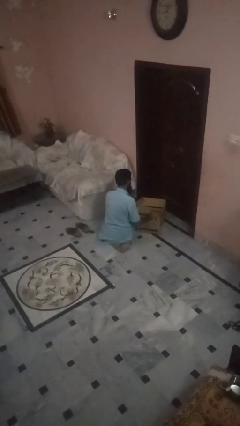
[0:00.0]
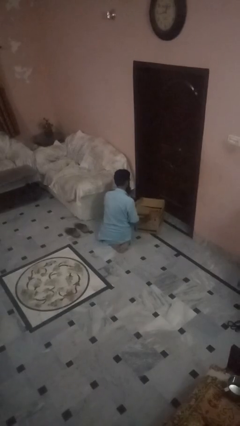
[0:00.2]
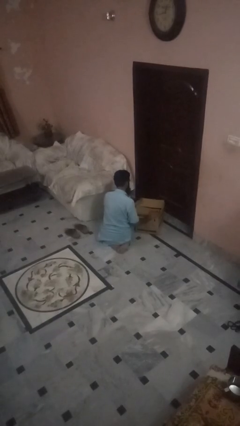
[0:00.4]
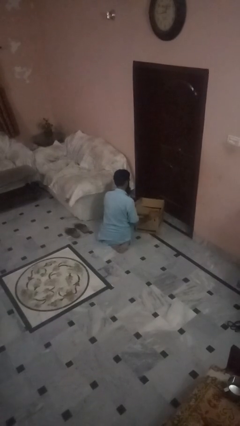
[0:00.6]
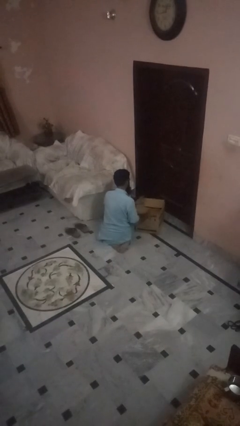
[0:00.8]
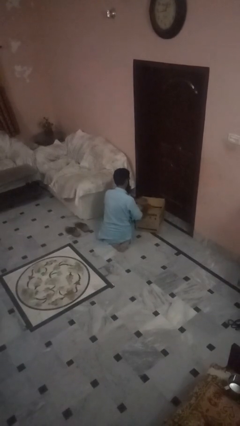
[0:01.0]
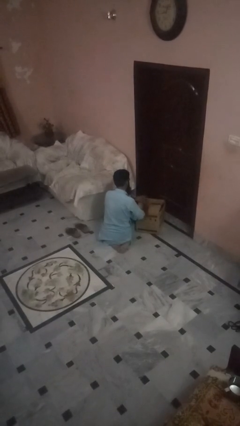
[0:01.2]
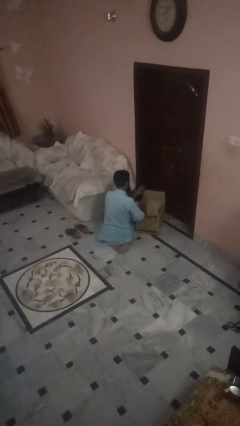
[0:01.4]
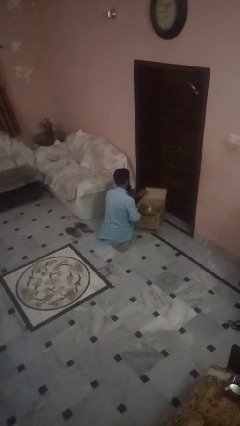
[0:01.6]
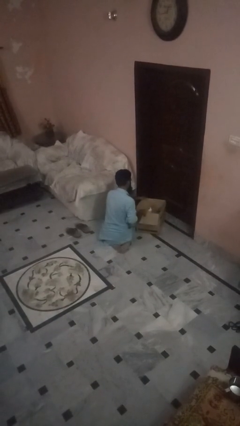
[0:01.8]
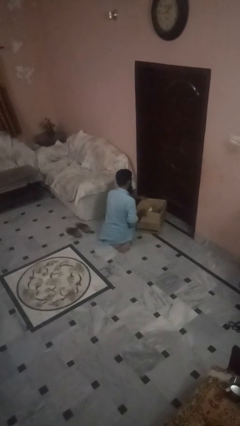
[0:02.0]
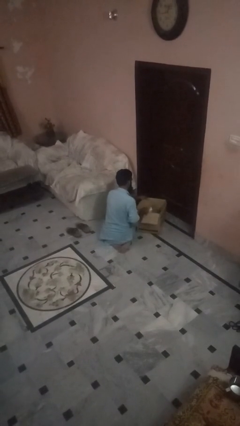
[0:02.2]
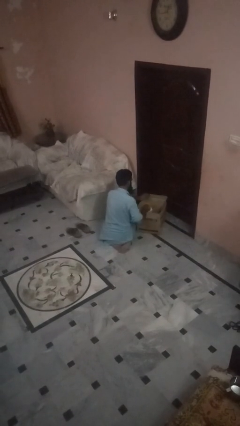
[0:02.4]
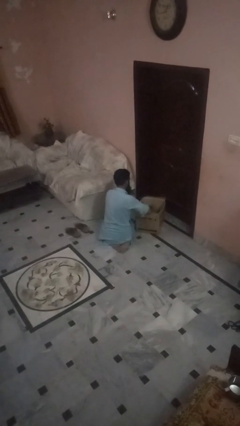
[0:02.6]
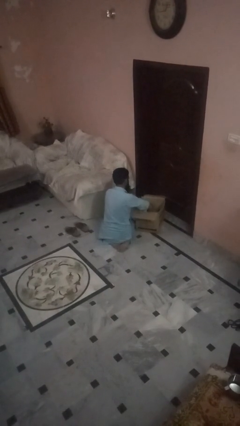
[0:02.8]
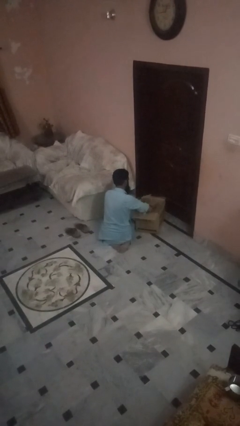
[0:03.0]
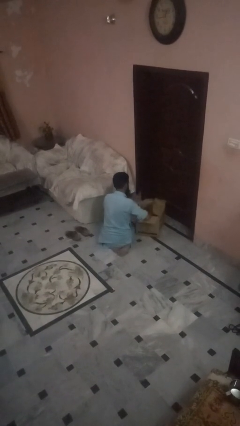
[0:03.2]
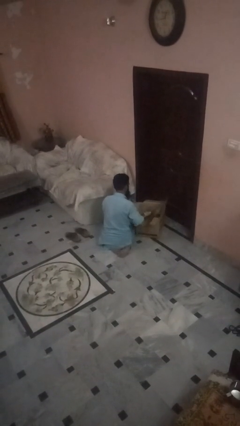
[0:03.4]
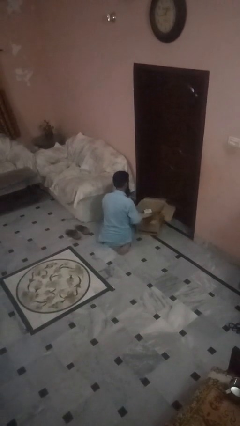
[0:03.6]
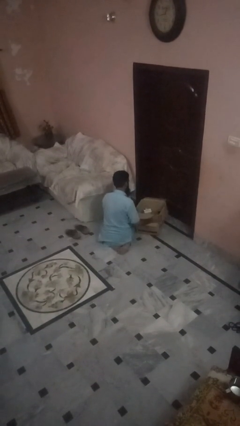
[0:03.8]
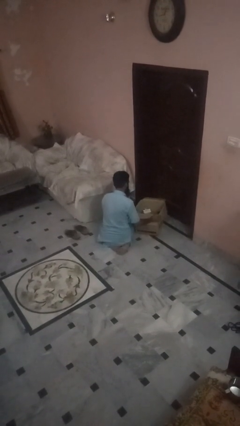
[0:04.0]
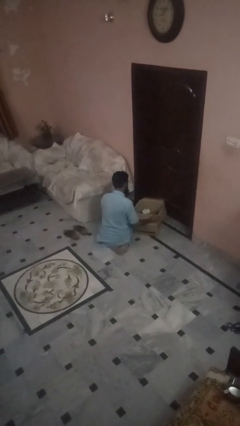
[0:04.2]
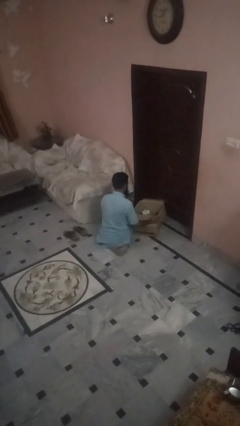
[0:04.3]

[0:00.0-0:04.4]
person opens box

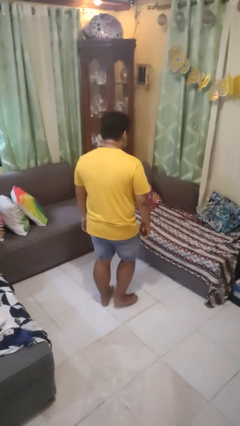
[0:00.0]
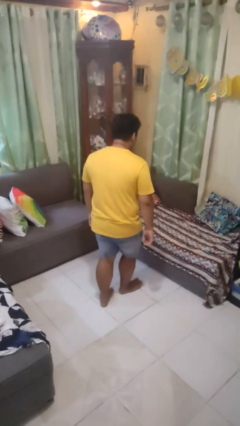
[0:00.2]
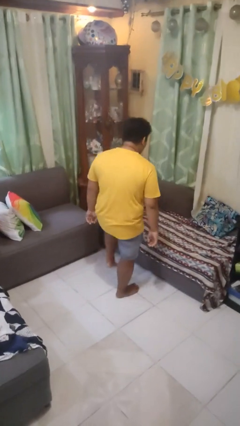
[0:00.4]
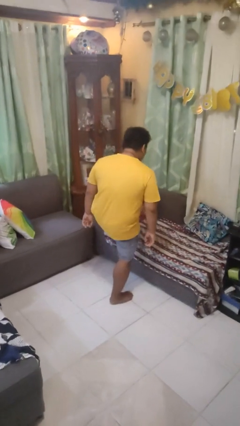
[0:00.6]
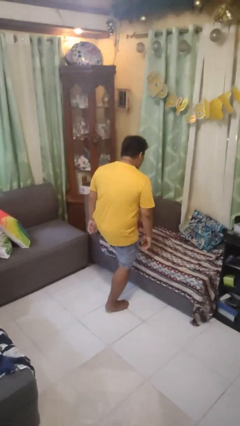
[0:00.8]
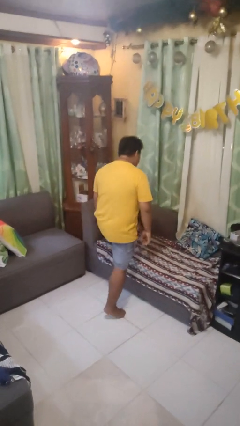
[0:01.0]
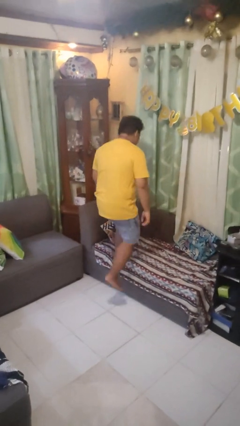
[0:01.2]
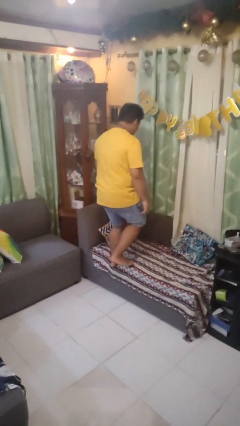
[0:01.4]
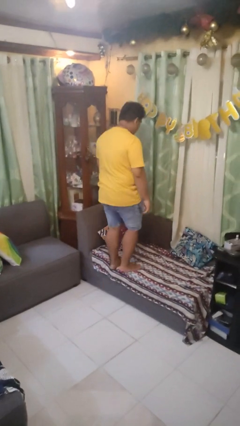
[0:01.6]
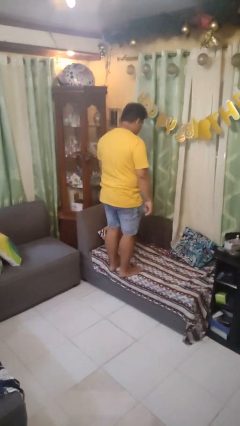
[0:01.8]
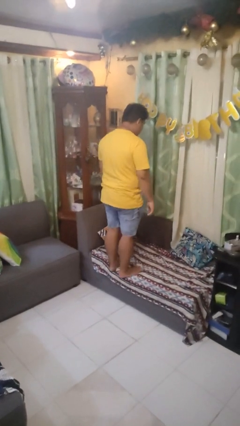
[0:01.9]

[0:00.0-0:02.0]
person climbs on couch

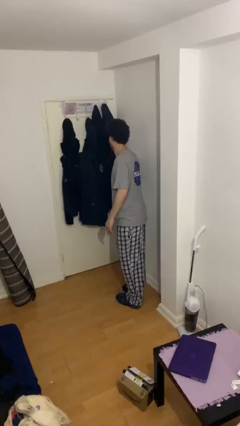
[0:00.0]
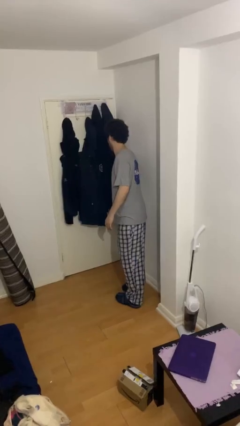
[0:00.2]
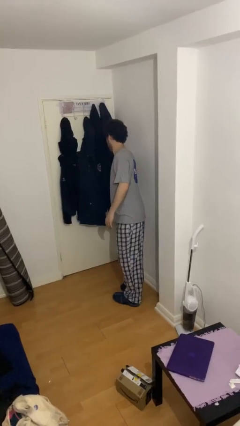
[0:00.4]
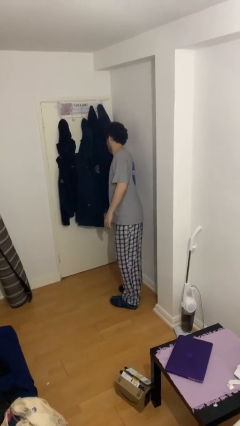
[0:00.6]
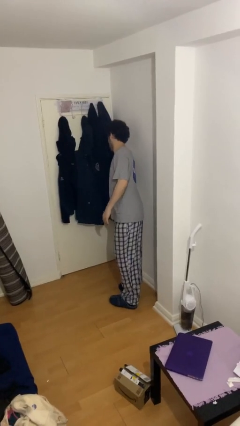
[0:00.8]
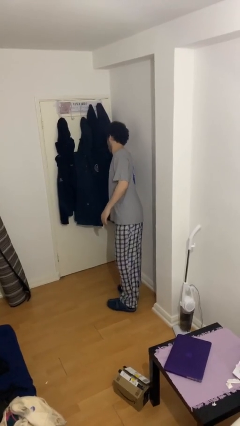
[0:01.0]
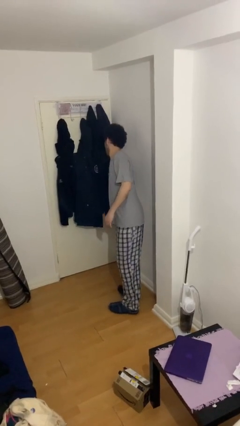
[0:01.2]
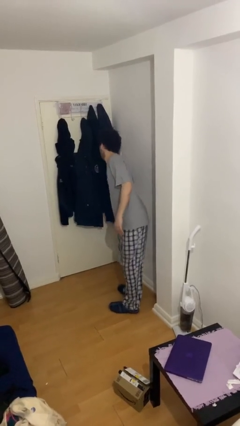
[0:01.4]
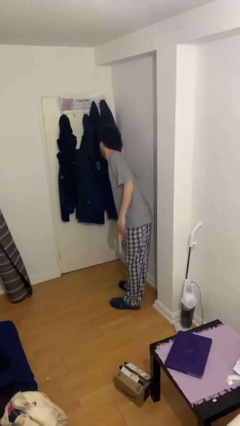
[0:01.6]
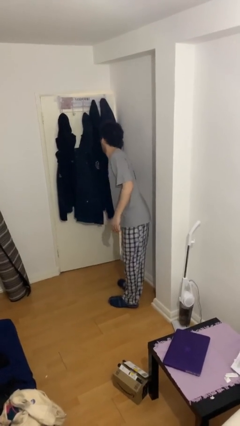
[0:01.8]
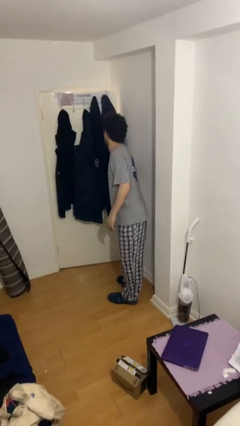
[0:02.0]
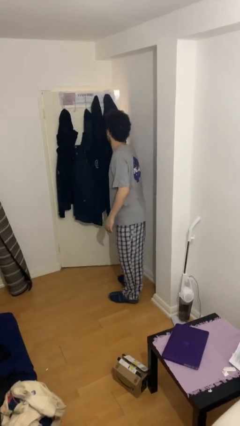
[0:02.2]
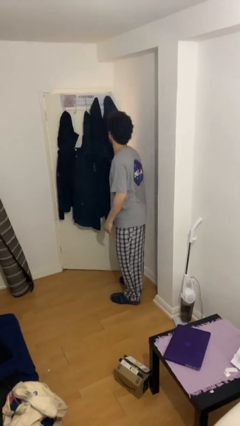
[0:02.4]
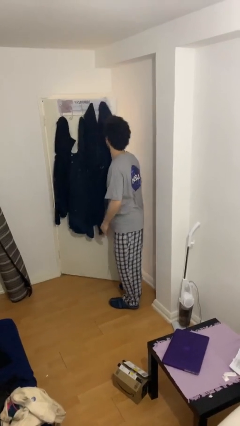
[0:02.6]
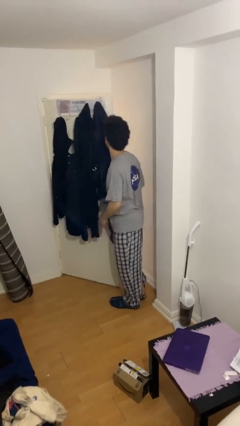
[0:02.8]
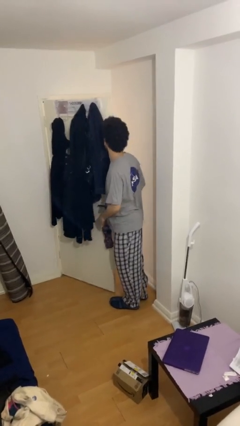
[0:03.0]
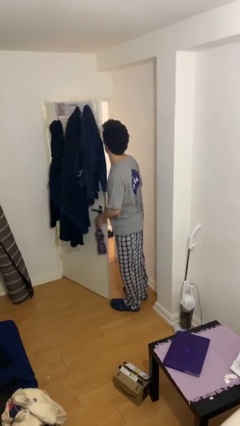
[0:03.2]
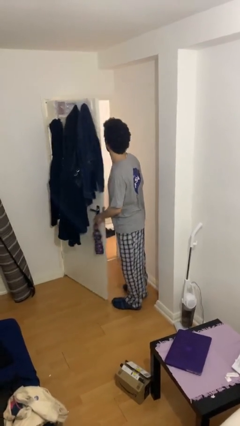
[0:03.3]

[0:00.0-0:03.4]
person opens facility door

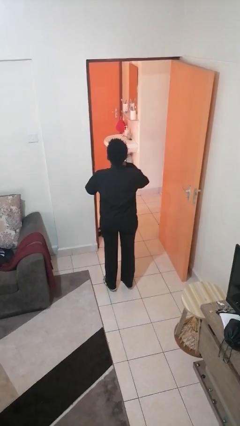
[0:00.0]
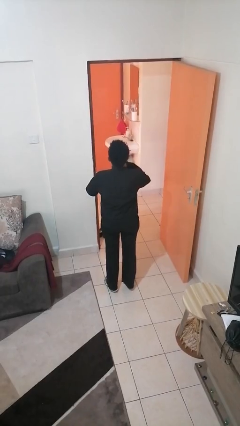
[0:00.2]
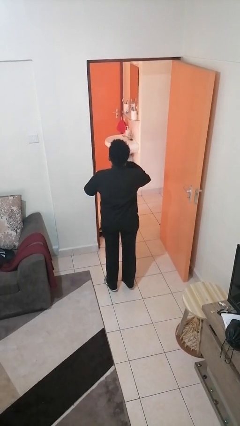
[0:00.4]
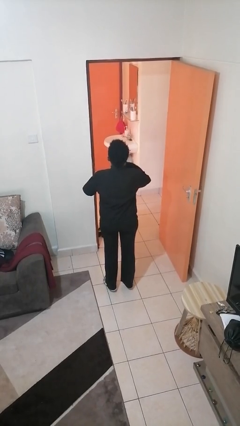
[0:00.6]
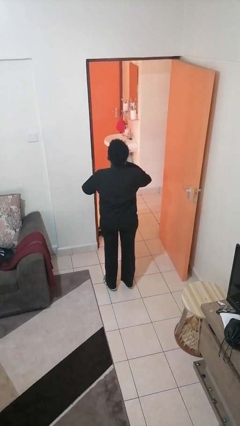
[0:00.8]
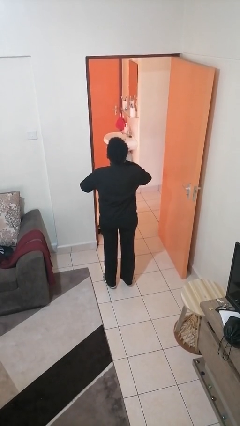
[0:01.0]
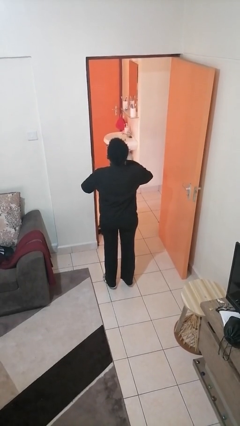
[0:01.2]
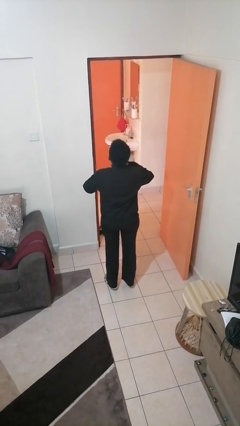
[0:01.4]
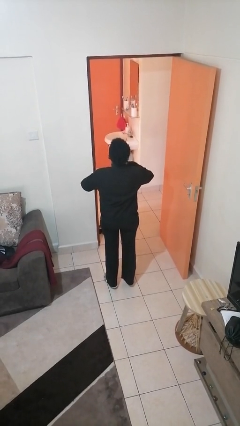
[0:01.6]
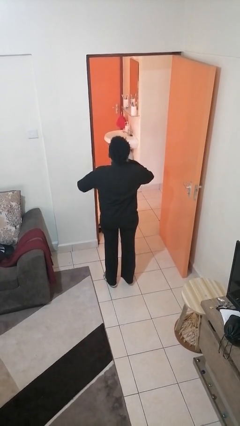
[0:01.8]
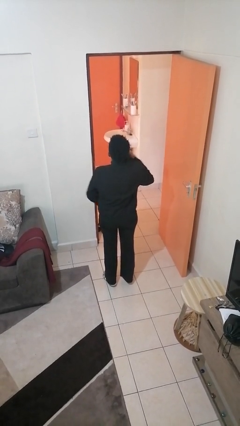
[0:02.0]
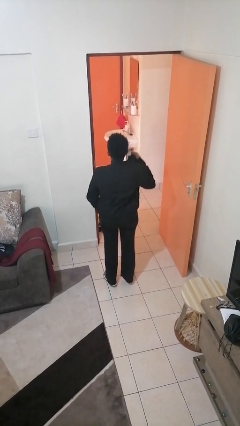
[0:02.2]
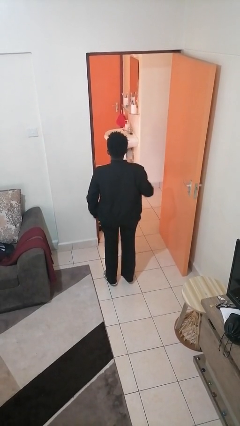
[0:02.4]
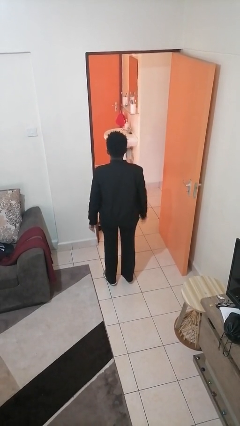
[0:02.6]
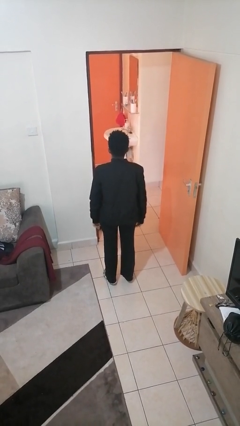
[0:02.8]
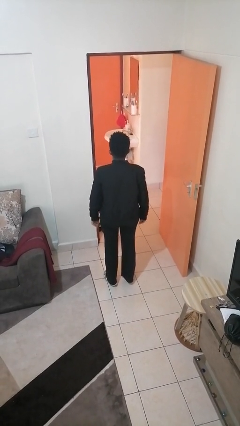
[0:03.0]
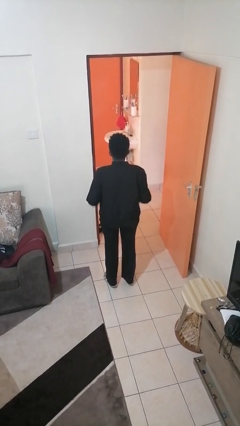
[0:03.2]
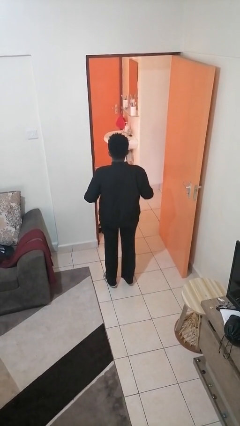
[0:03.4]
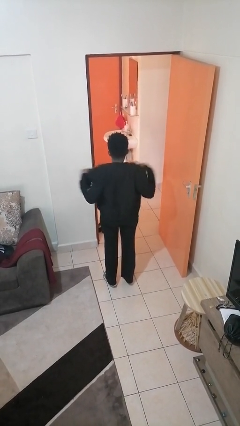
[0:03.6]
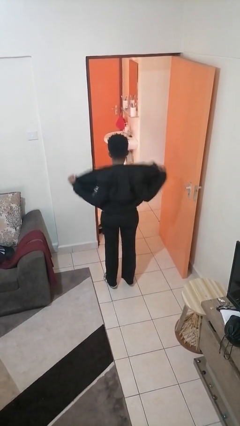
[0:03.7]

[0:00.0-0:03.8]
person unzips jacket

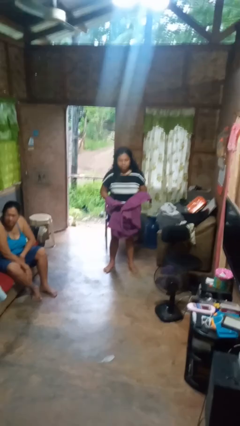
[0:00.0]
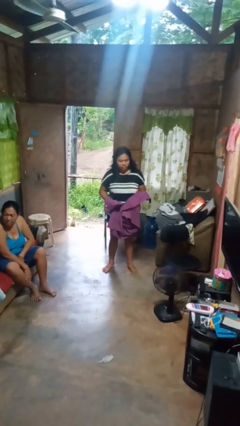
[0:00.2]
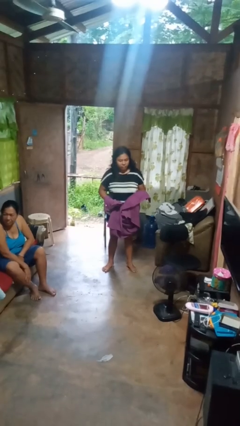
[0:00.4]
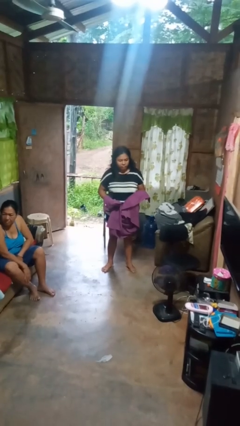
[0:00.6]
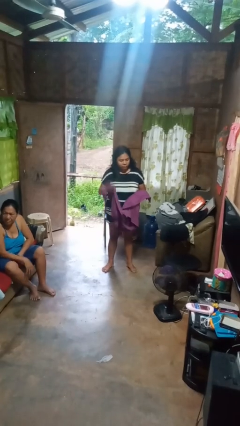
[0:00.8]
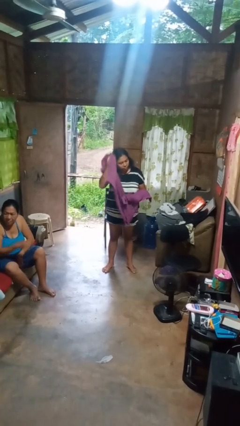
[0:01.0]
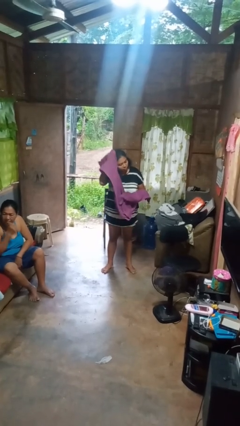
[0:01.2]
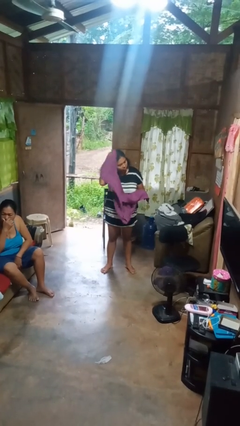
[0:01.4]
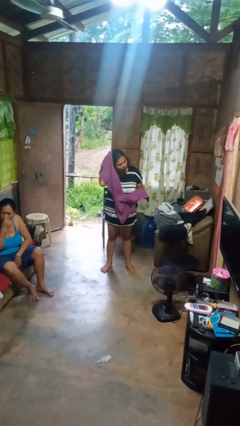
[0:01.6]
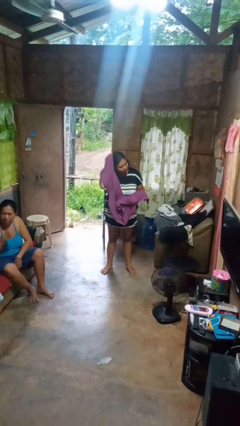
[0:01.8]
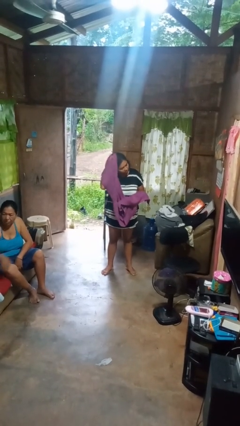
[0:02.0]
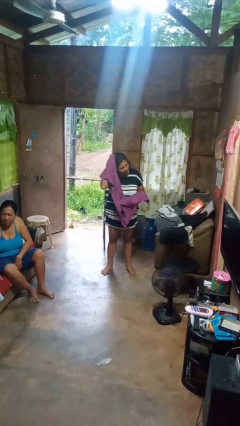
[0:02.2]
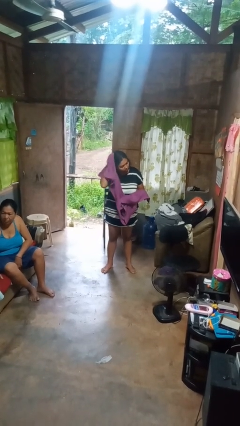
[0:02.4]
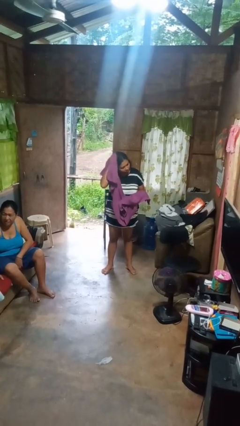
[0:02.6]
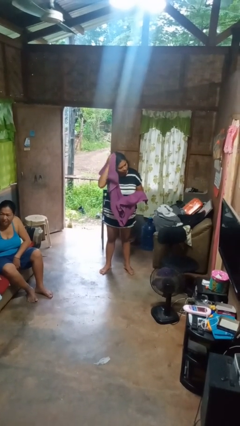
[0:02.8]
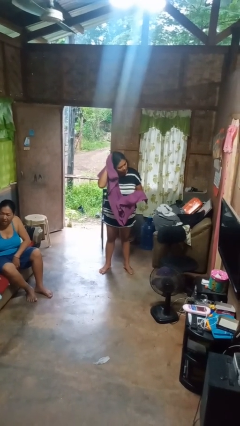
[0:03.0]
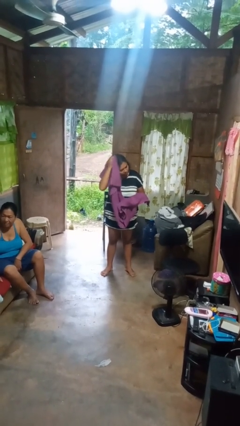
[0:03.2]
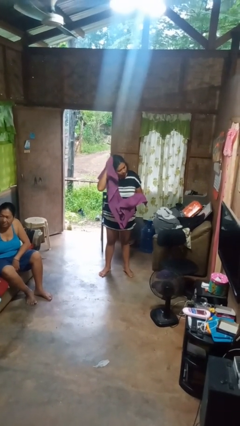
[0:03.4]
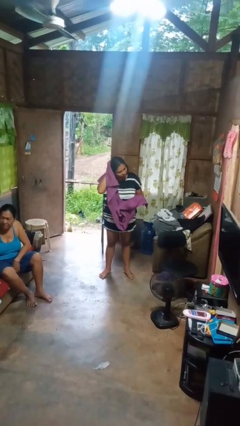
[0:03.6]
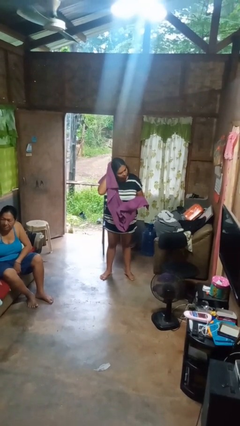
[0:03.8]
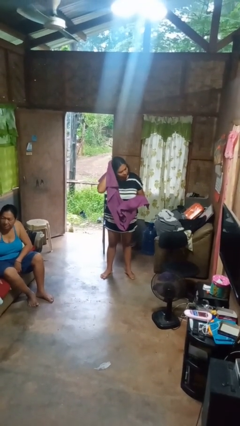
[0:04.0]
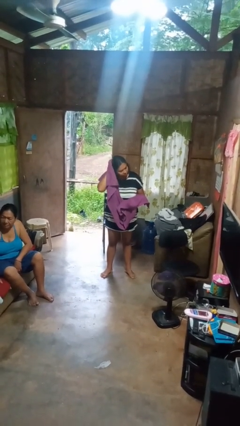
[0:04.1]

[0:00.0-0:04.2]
person dries hair with towel
